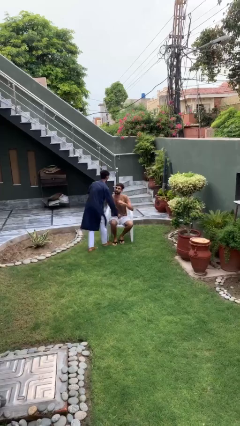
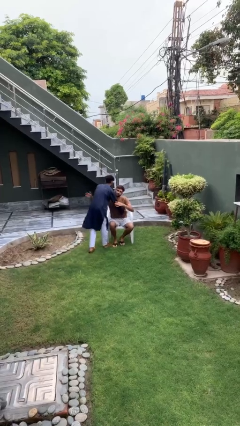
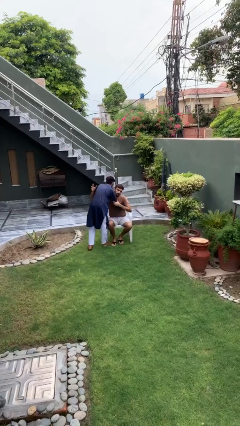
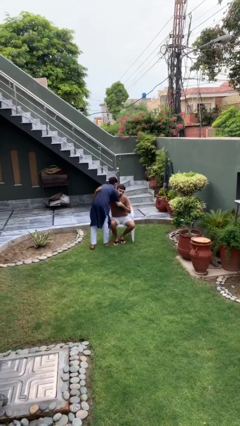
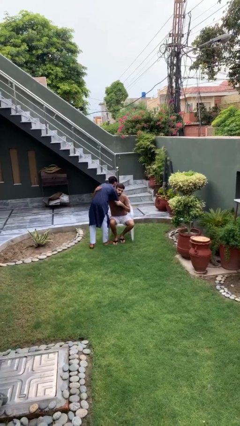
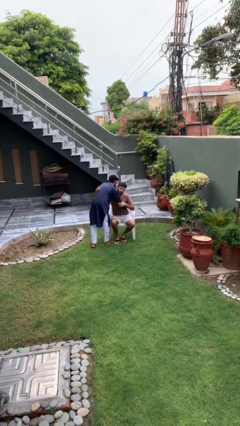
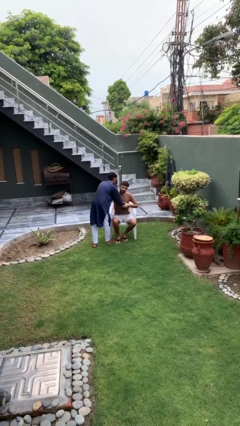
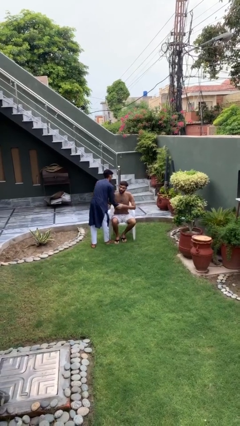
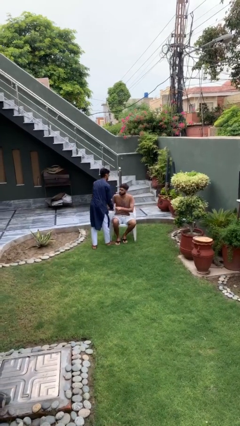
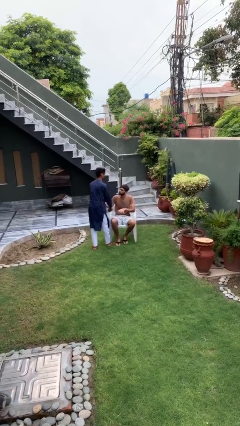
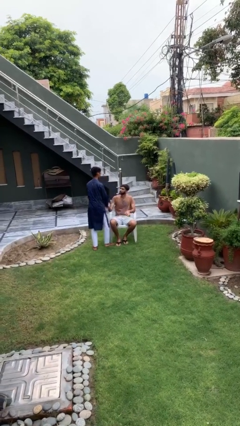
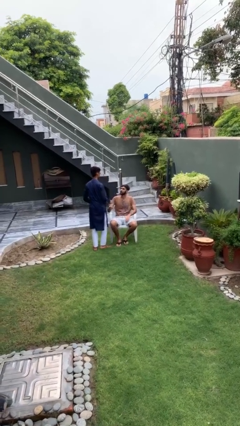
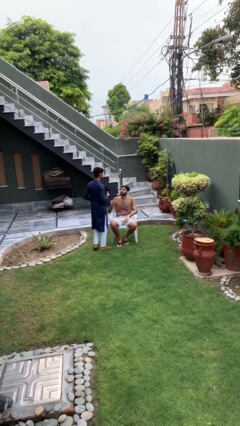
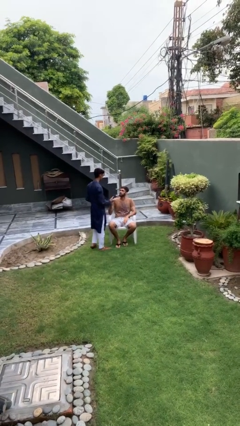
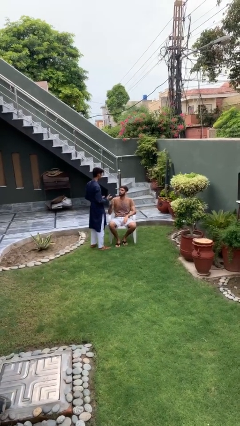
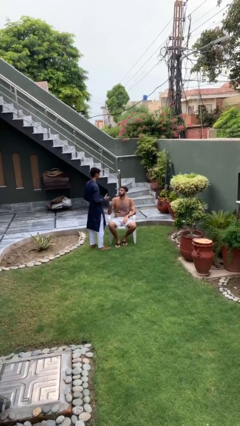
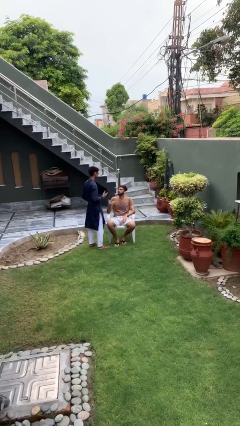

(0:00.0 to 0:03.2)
person embraces person

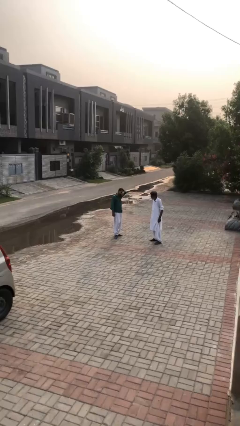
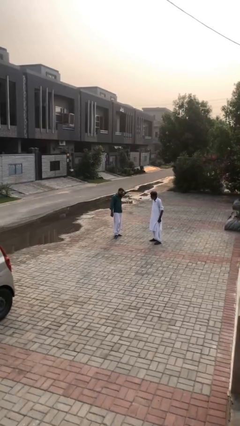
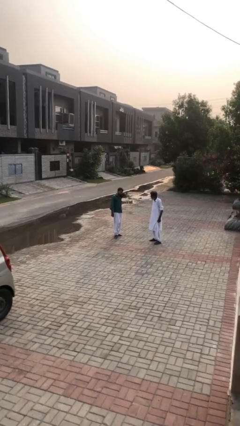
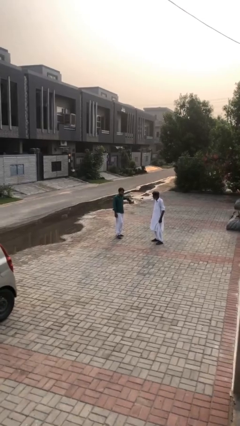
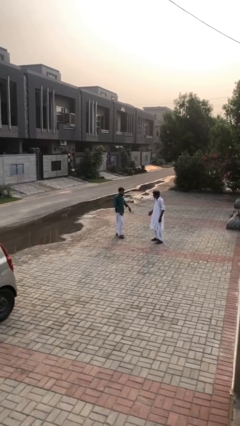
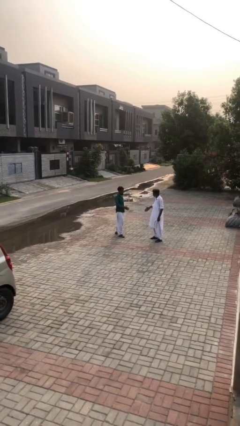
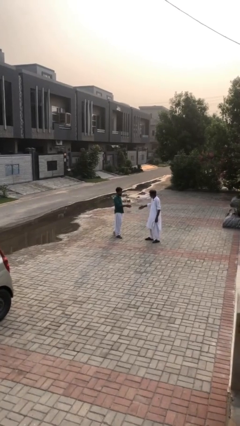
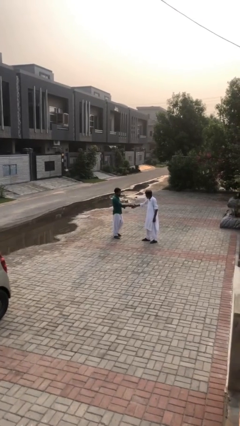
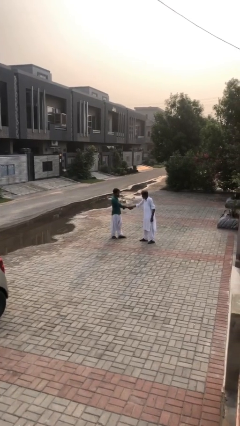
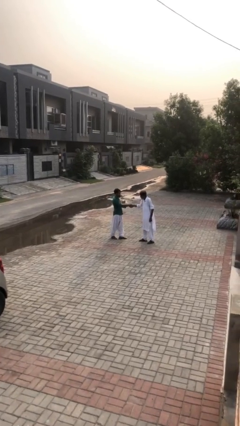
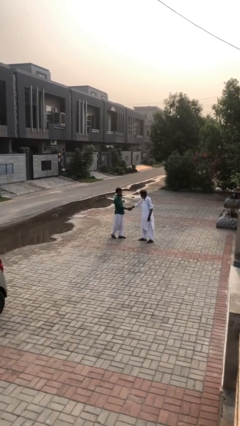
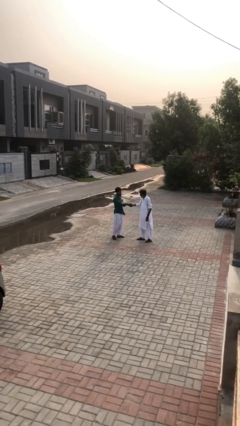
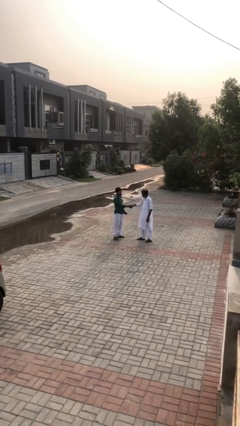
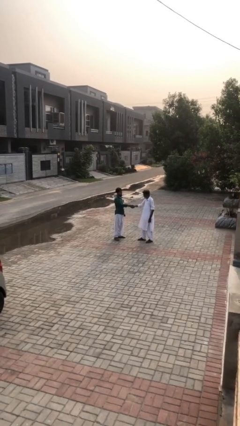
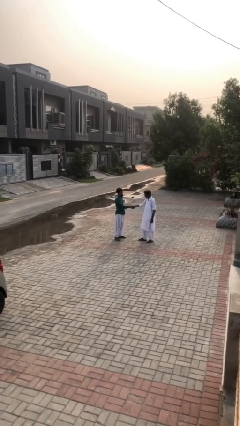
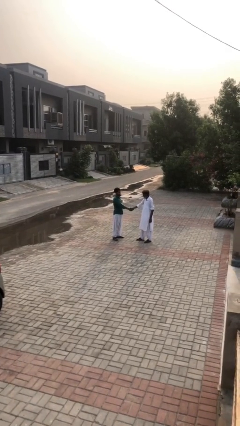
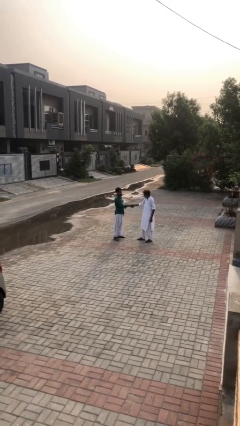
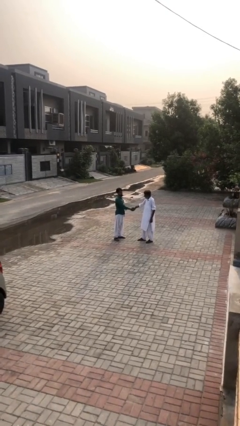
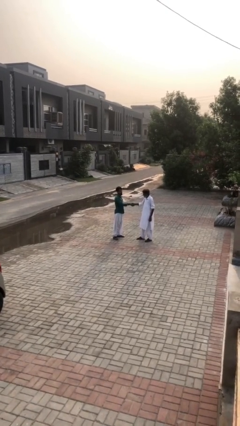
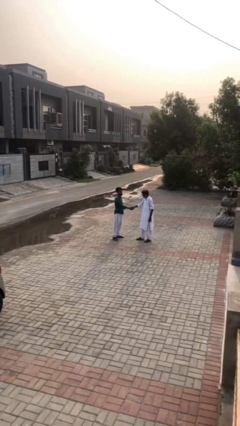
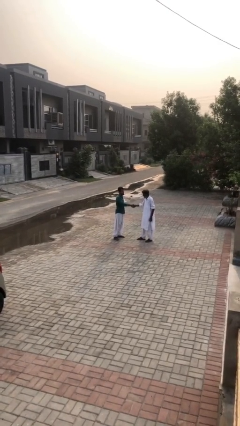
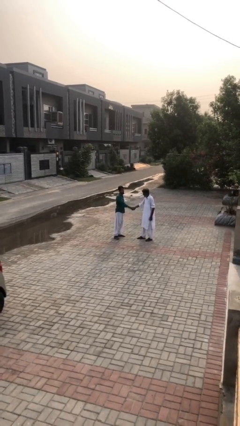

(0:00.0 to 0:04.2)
person shakes hand

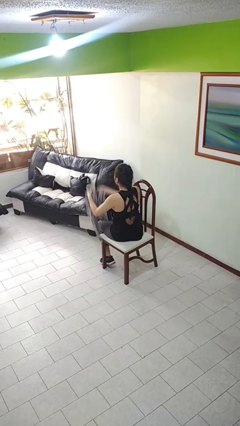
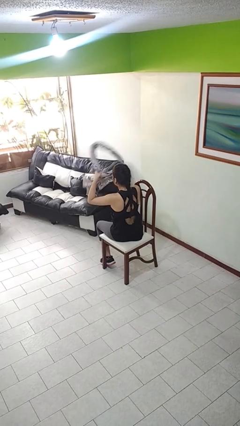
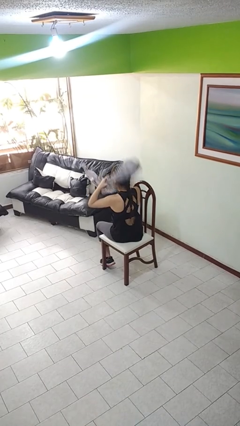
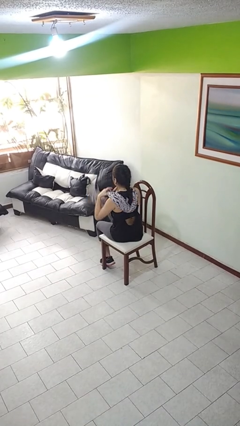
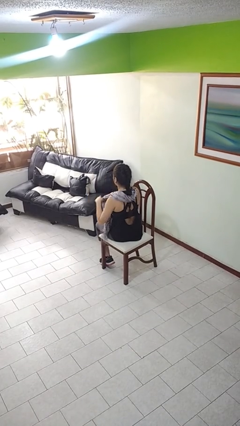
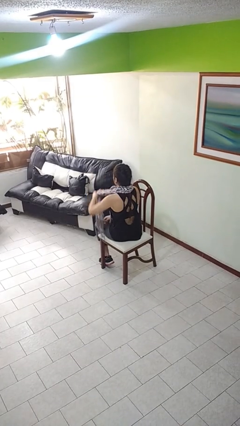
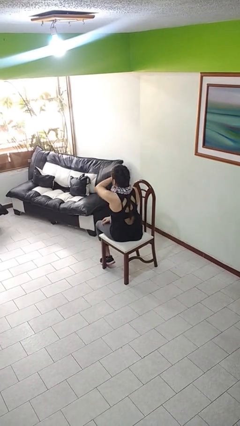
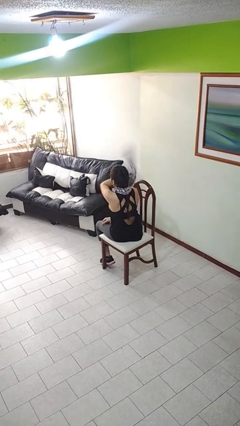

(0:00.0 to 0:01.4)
person puts on scarf

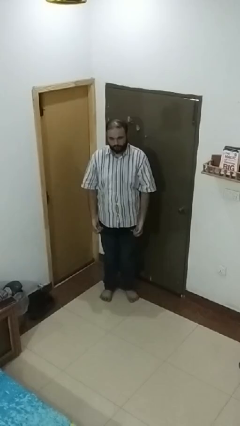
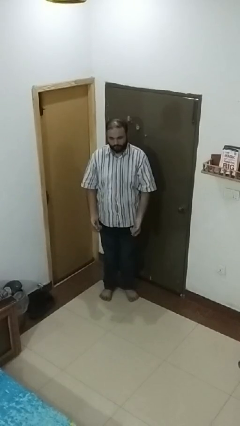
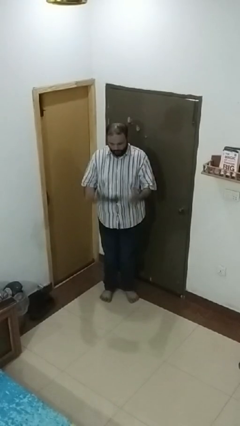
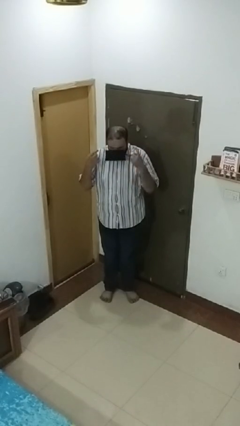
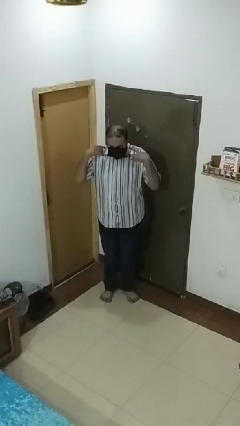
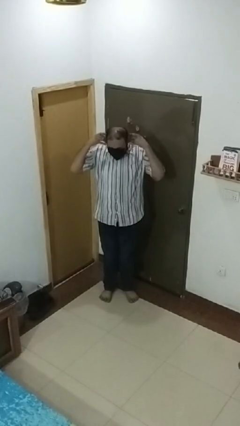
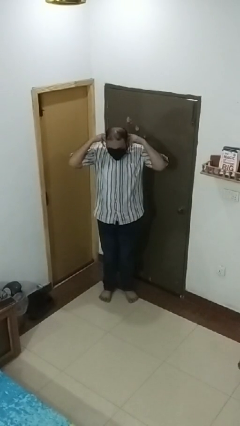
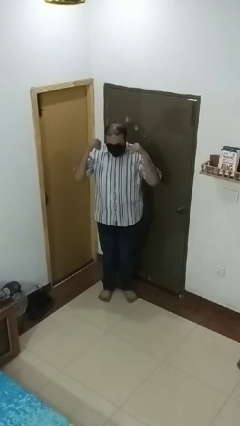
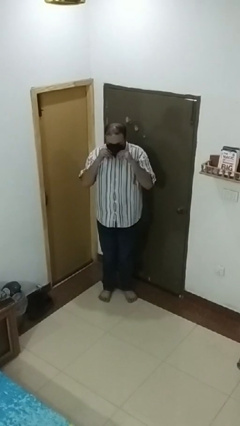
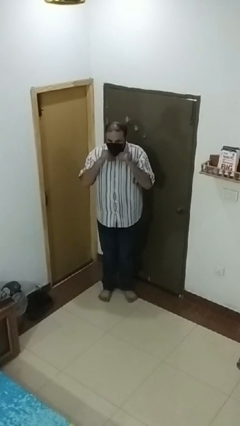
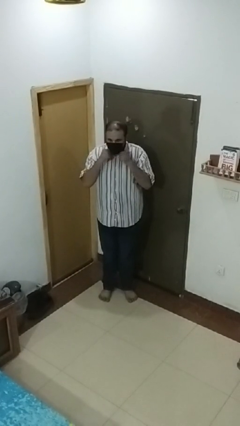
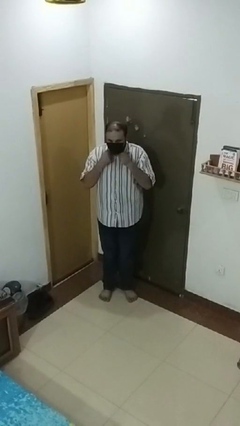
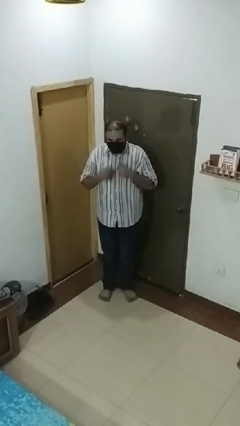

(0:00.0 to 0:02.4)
person puts on facemask

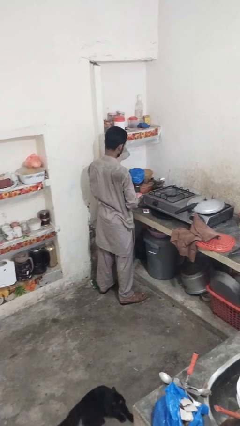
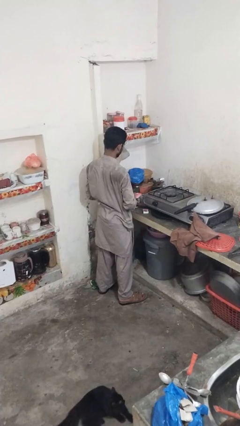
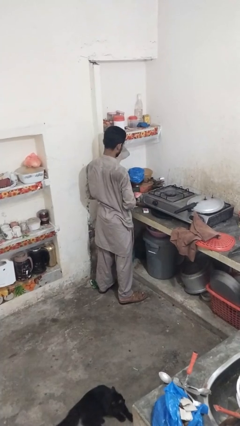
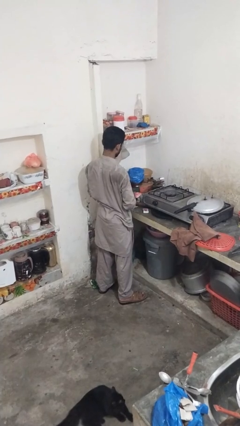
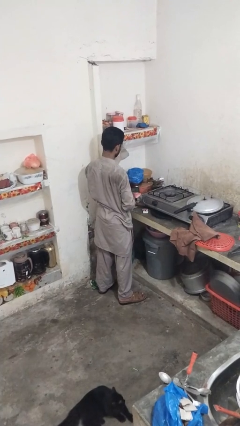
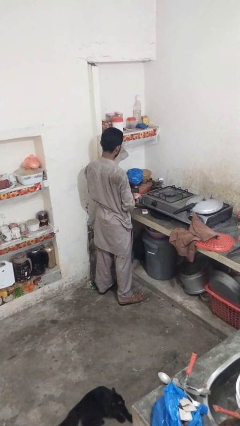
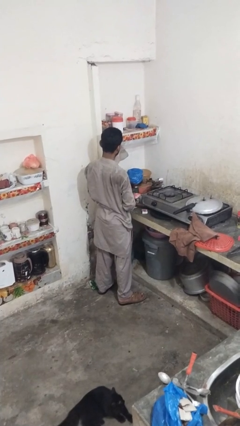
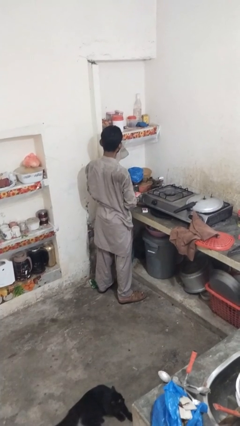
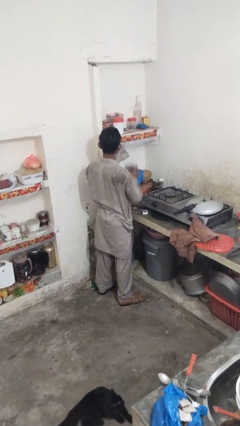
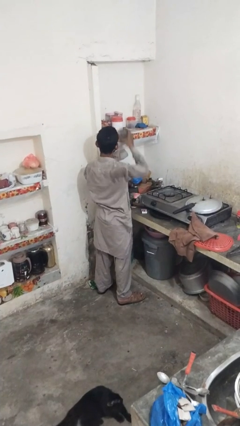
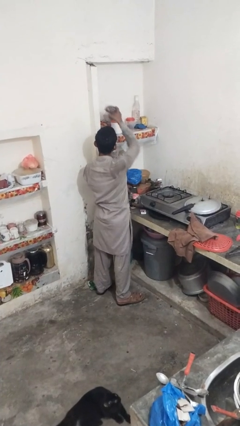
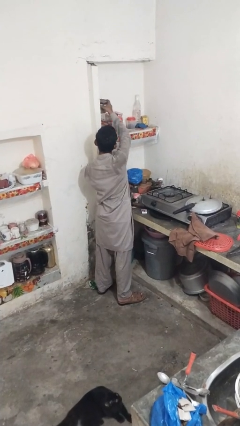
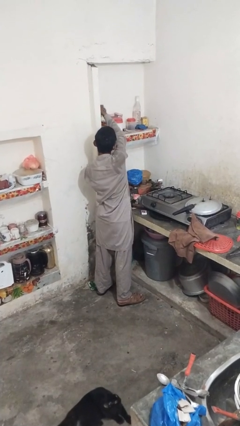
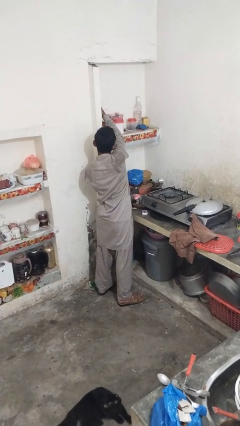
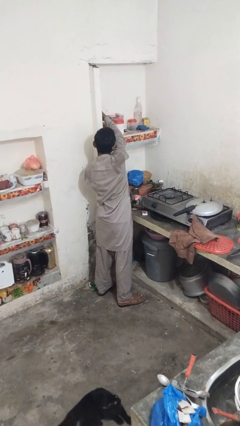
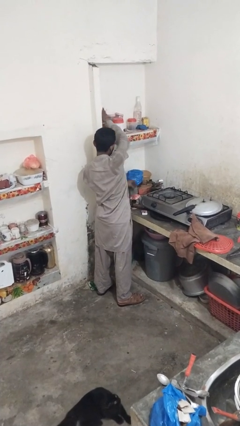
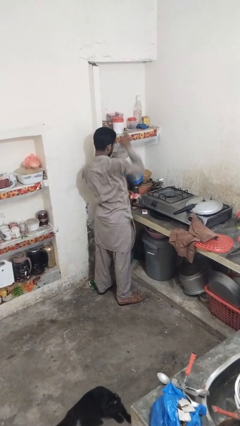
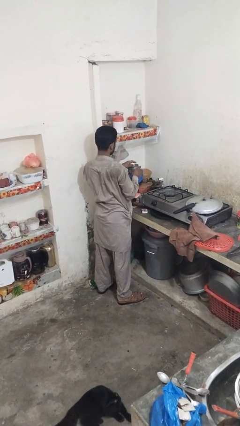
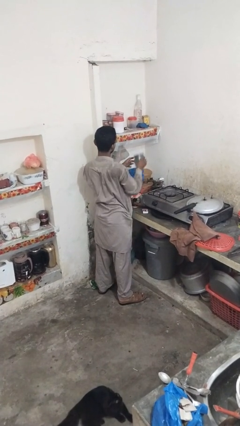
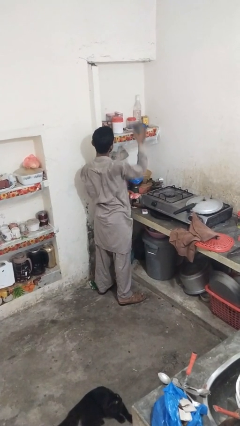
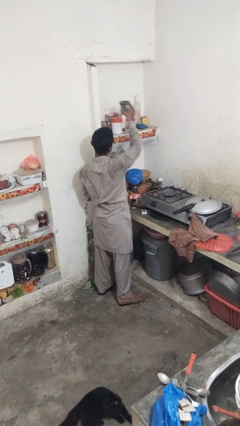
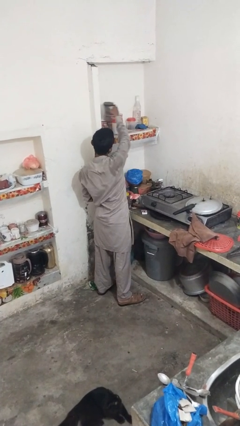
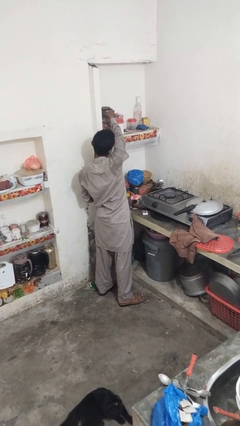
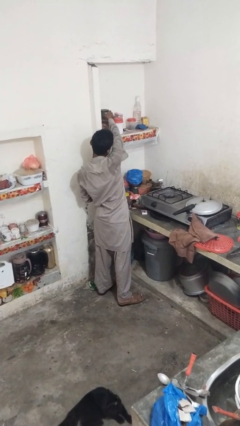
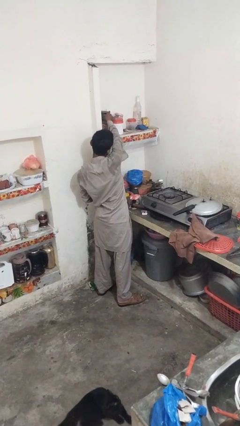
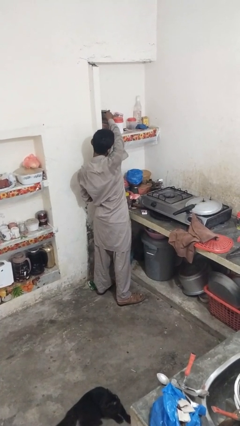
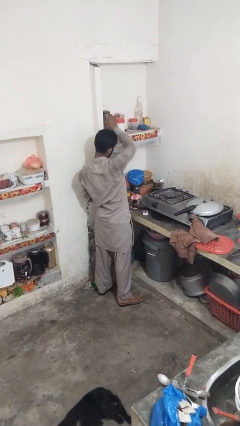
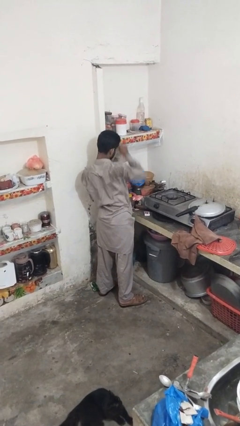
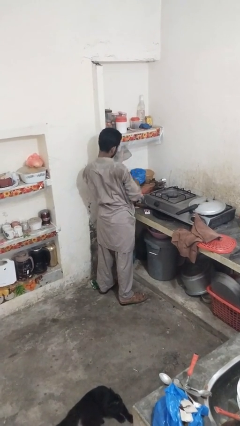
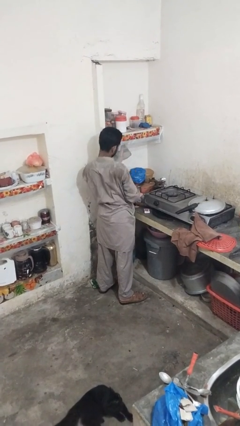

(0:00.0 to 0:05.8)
person loads groceries into cabinet

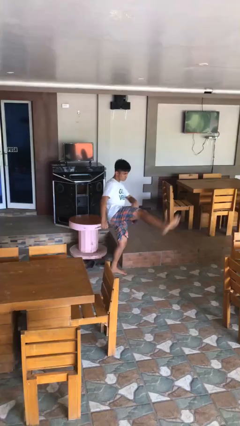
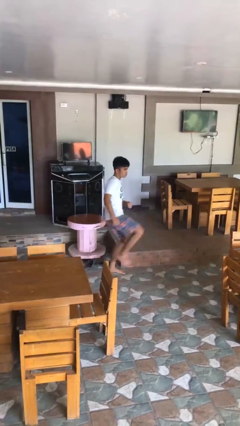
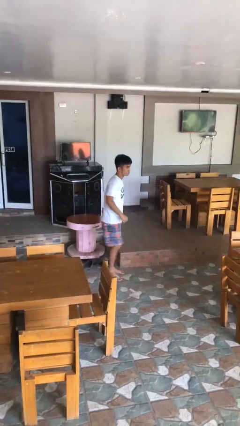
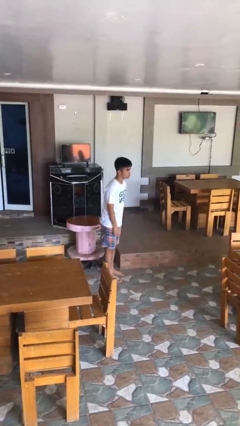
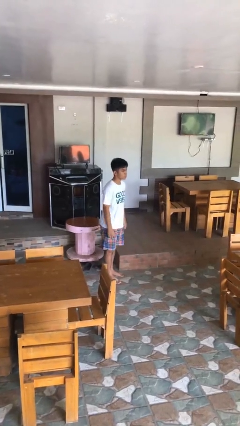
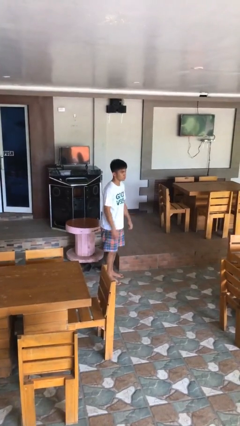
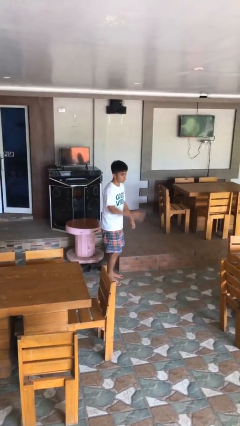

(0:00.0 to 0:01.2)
person karate kicks
